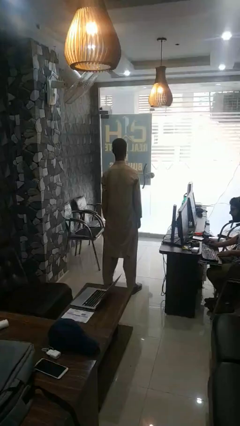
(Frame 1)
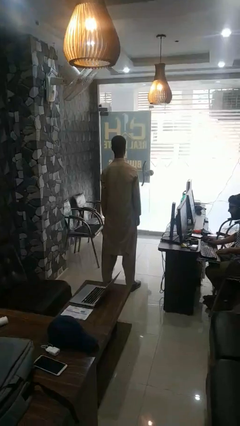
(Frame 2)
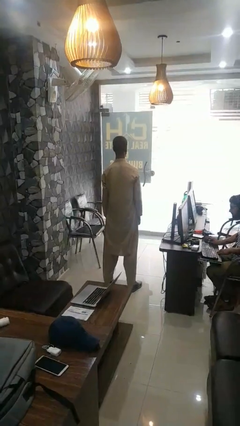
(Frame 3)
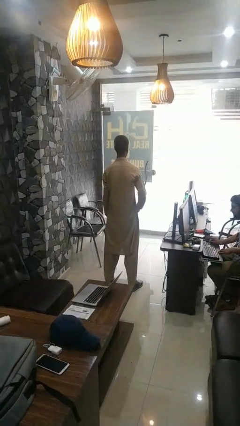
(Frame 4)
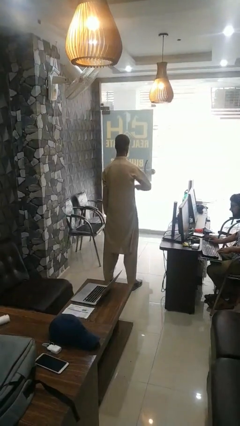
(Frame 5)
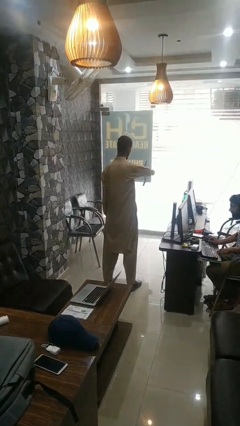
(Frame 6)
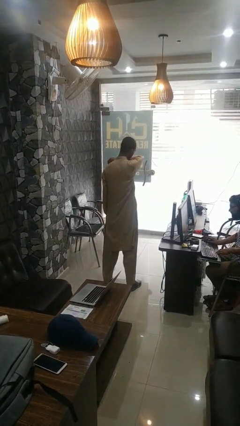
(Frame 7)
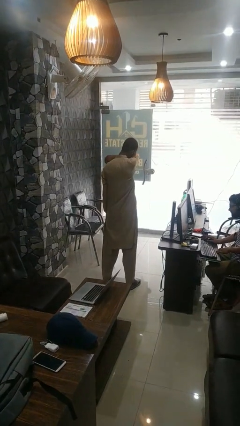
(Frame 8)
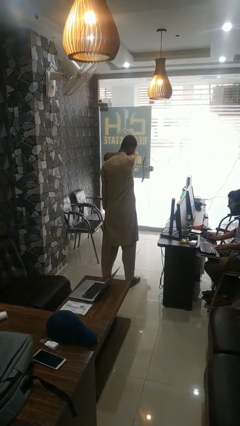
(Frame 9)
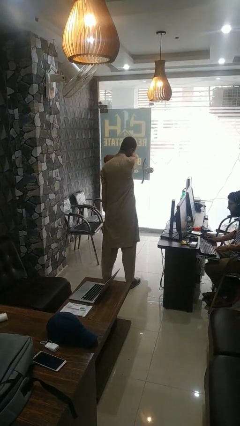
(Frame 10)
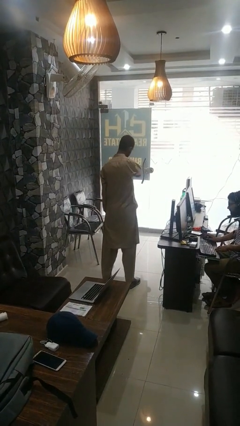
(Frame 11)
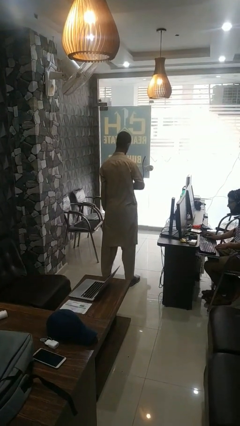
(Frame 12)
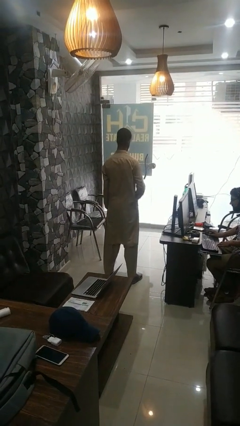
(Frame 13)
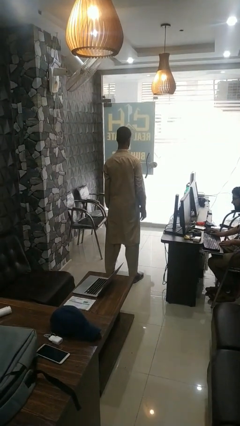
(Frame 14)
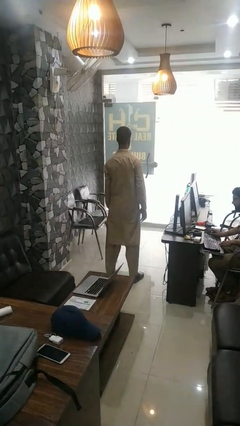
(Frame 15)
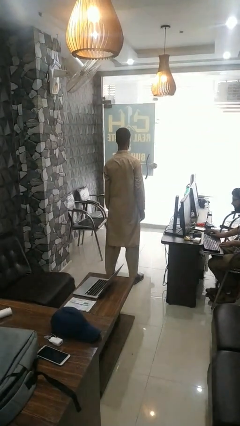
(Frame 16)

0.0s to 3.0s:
person sneezes into arm

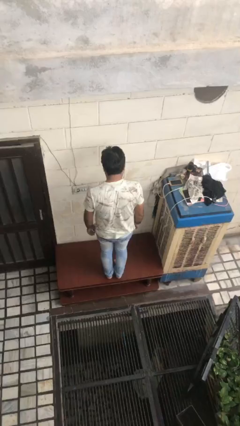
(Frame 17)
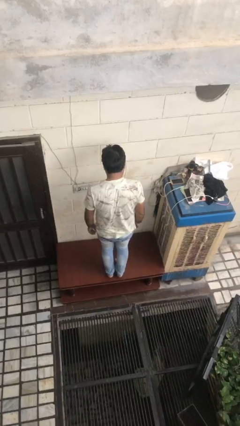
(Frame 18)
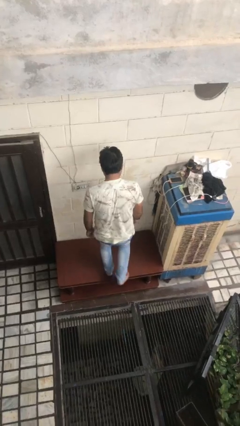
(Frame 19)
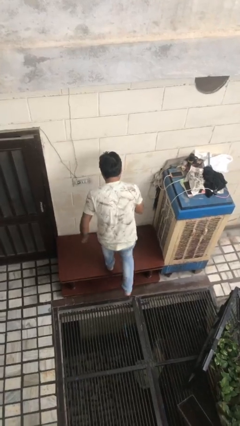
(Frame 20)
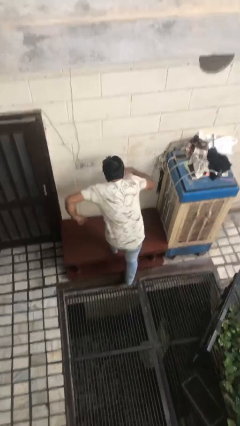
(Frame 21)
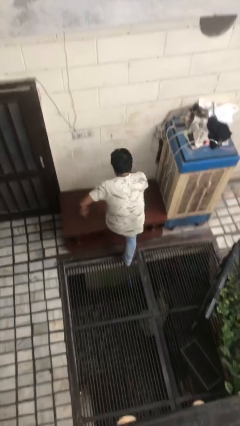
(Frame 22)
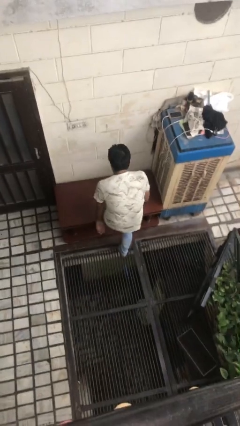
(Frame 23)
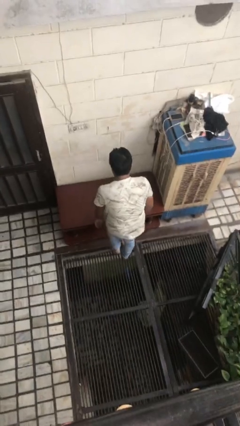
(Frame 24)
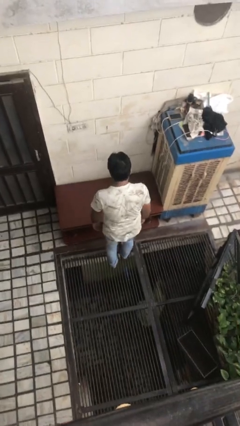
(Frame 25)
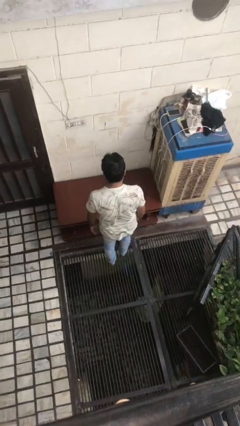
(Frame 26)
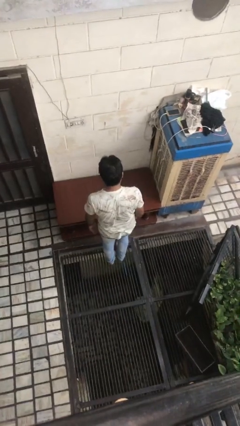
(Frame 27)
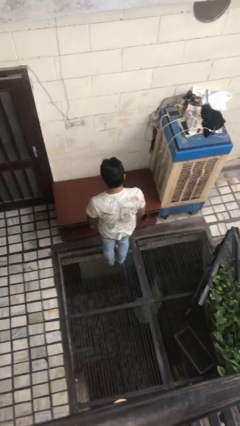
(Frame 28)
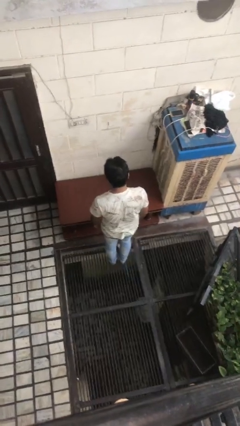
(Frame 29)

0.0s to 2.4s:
person climbs off table

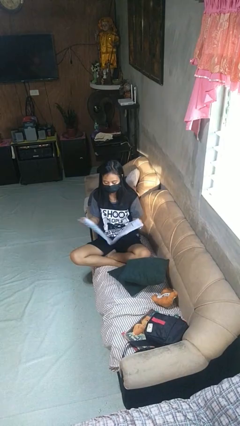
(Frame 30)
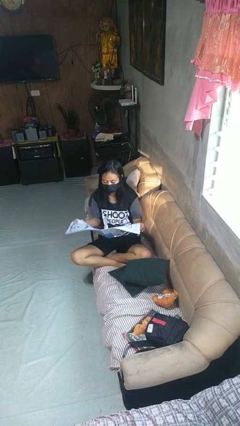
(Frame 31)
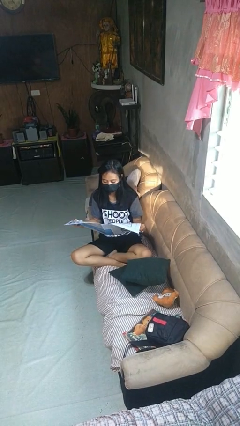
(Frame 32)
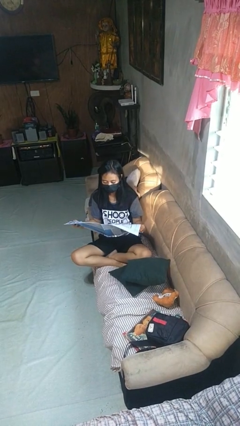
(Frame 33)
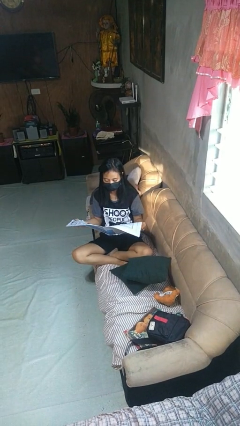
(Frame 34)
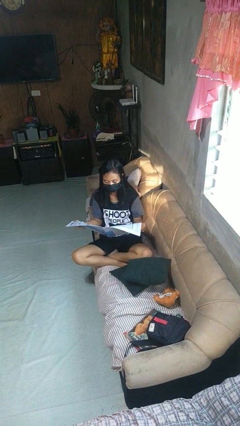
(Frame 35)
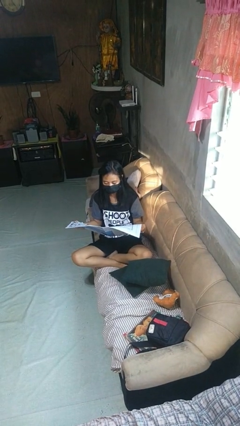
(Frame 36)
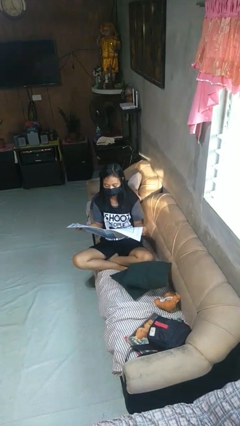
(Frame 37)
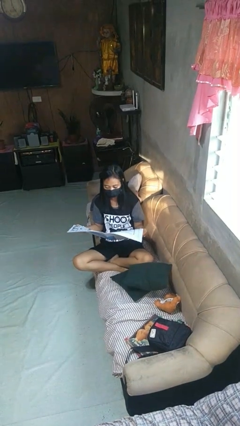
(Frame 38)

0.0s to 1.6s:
person reads newspaper

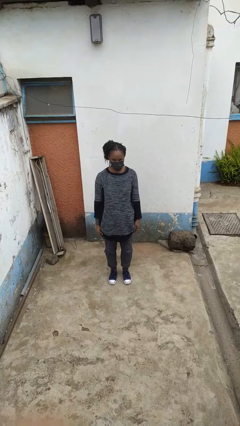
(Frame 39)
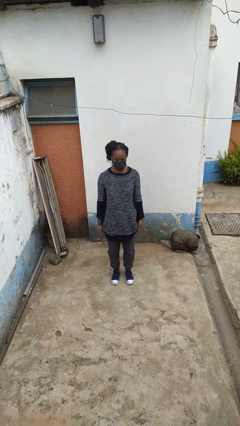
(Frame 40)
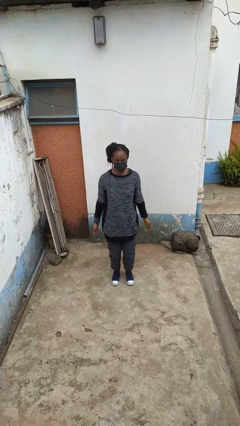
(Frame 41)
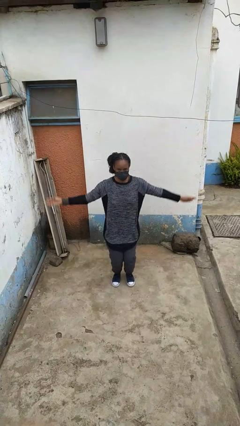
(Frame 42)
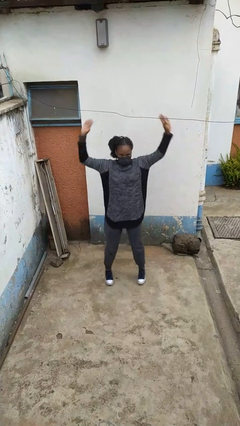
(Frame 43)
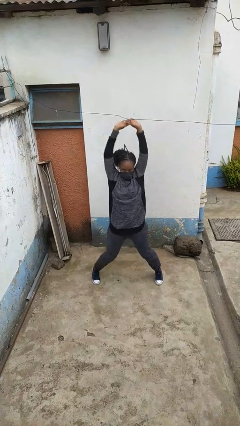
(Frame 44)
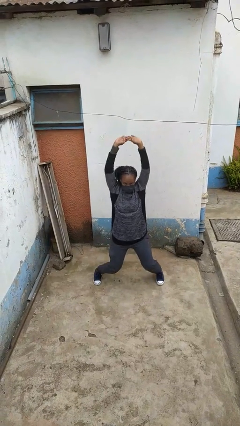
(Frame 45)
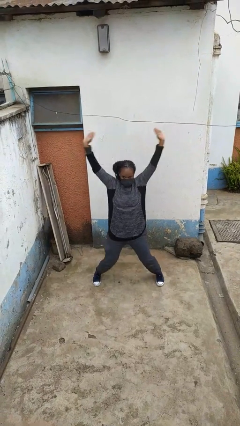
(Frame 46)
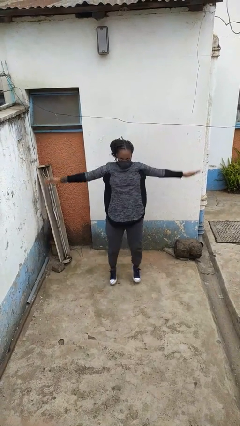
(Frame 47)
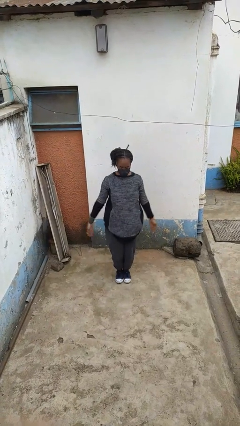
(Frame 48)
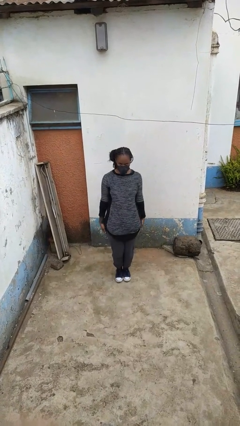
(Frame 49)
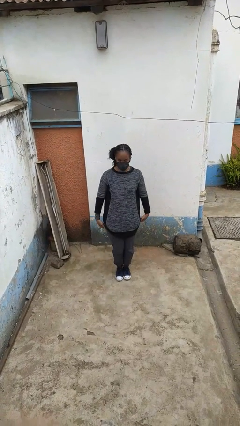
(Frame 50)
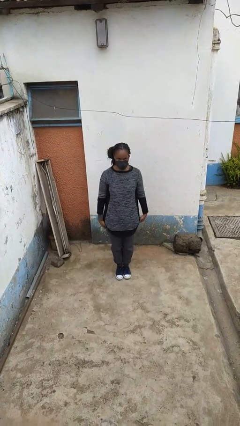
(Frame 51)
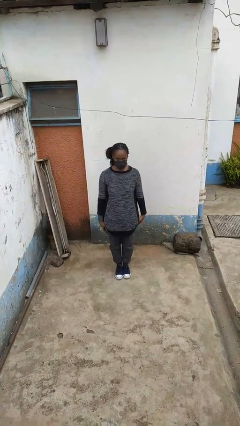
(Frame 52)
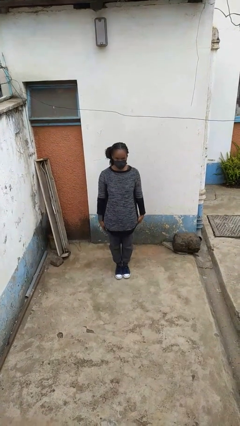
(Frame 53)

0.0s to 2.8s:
person exercises with jumping jacks

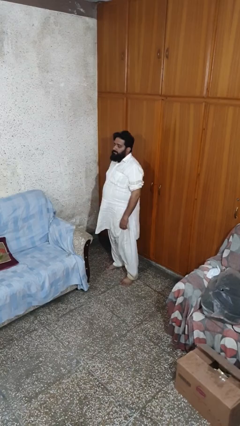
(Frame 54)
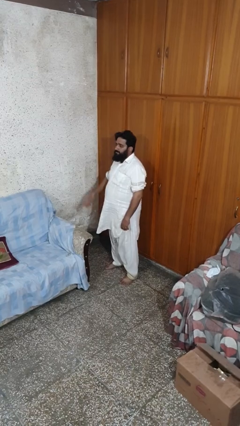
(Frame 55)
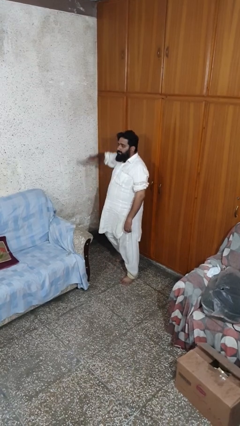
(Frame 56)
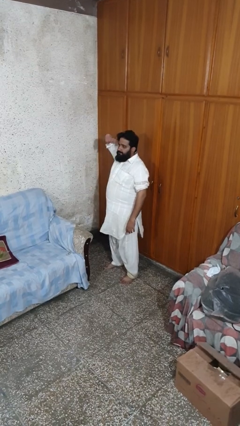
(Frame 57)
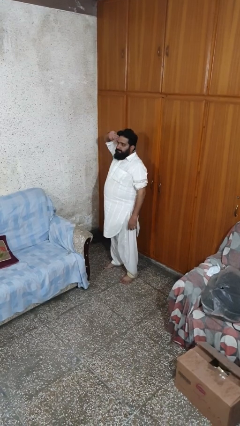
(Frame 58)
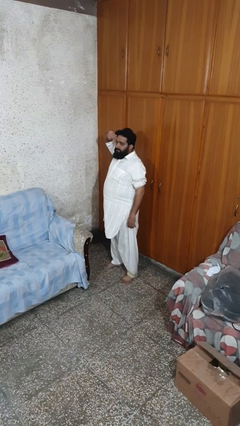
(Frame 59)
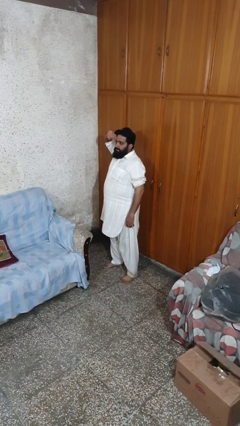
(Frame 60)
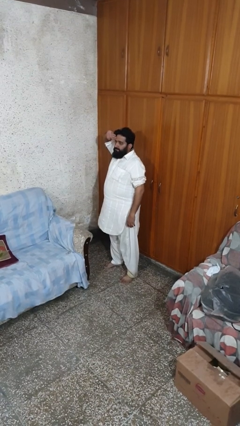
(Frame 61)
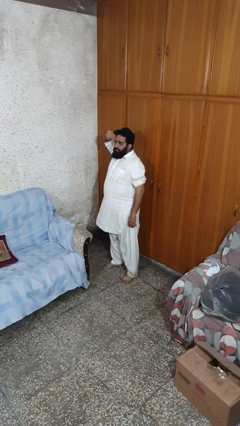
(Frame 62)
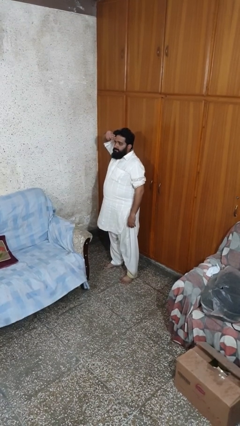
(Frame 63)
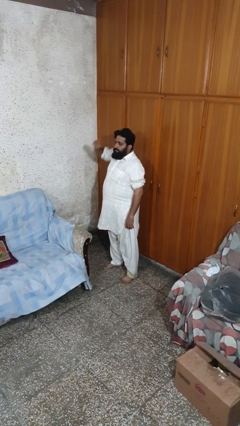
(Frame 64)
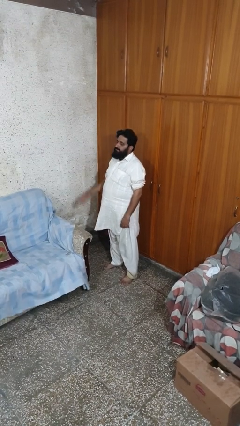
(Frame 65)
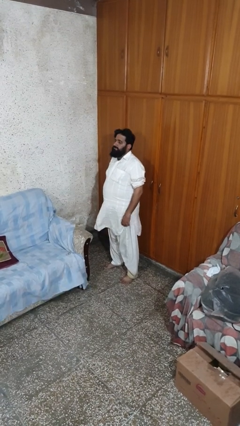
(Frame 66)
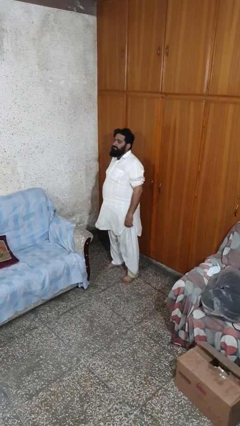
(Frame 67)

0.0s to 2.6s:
person salutes

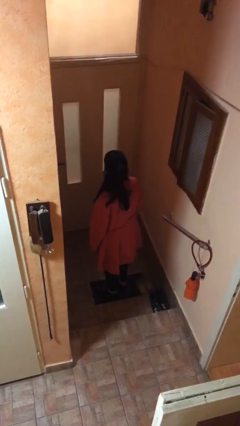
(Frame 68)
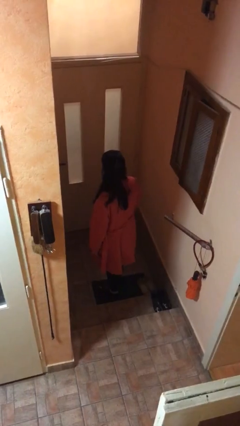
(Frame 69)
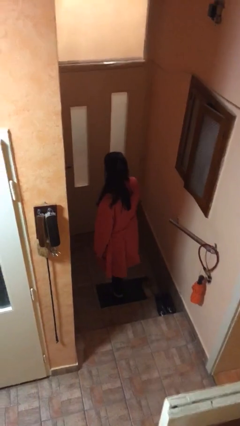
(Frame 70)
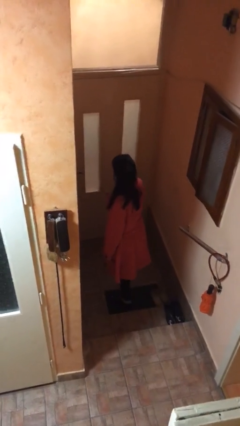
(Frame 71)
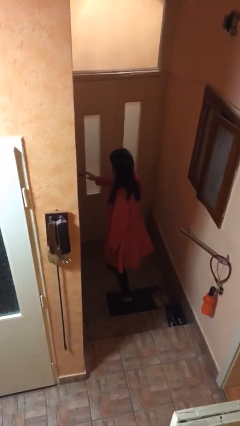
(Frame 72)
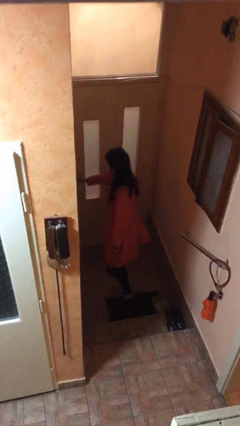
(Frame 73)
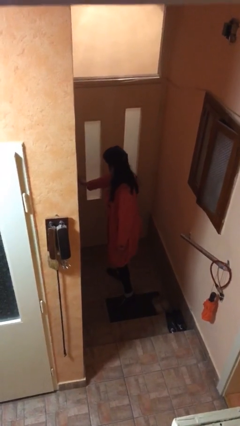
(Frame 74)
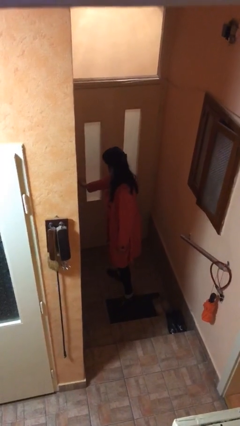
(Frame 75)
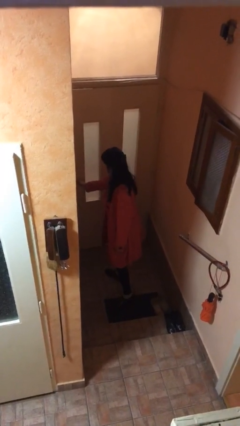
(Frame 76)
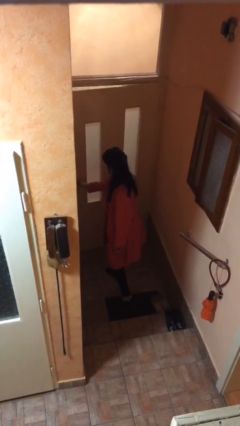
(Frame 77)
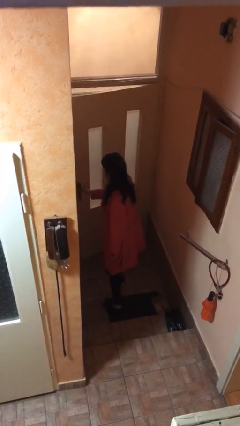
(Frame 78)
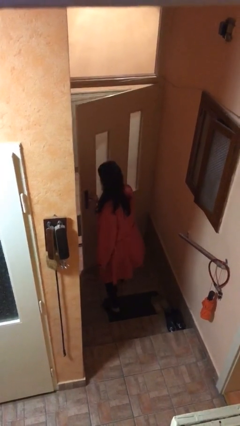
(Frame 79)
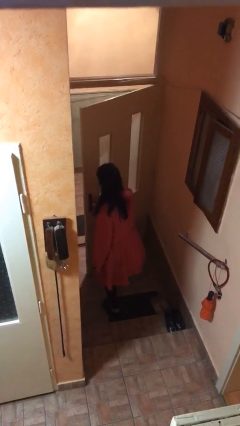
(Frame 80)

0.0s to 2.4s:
person opens facility door

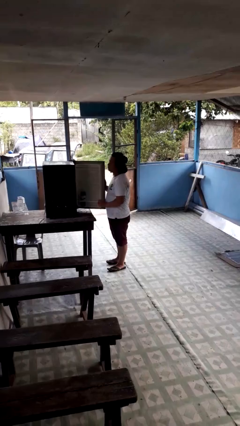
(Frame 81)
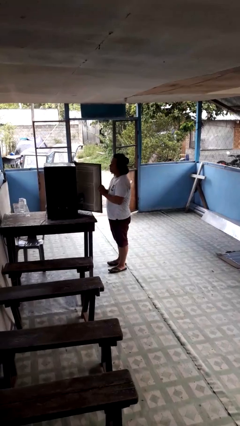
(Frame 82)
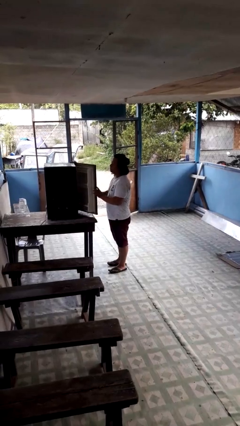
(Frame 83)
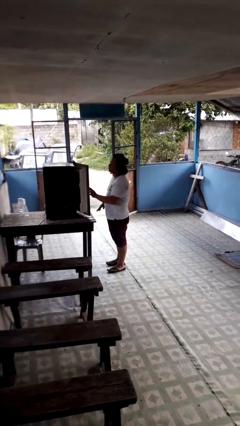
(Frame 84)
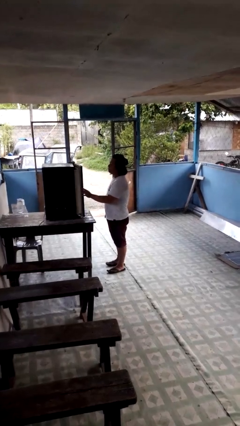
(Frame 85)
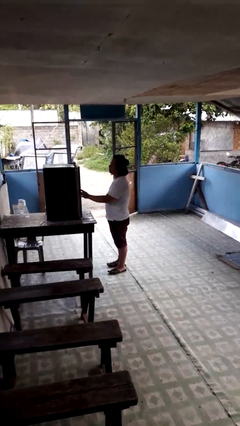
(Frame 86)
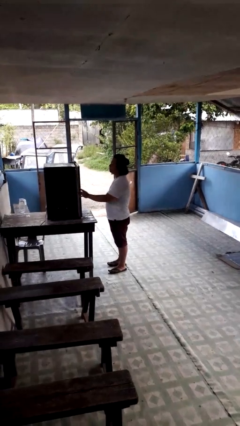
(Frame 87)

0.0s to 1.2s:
person closes refrigerator

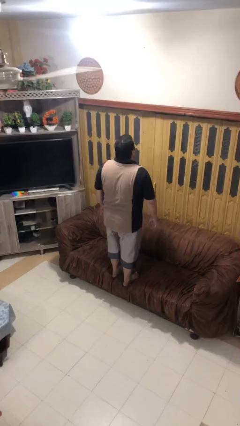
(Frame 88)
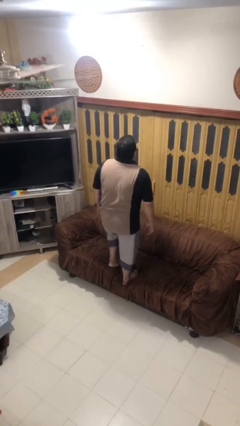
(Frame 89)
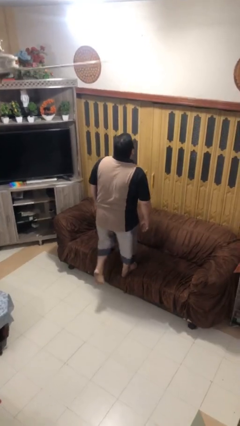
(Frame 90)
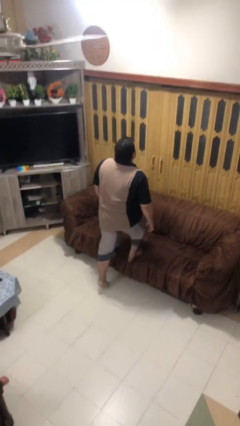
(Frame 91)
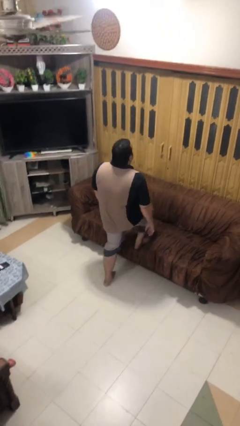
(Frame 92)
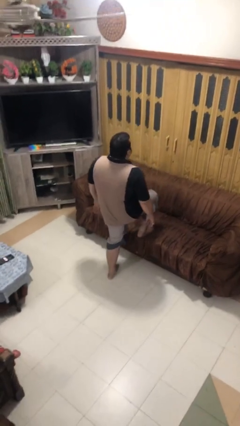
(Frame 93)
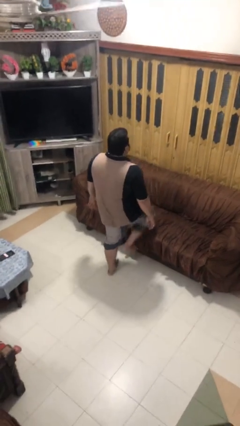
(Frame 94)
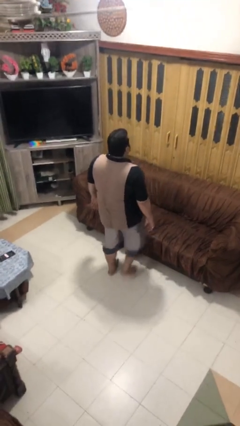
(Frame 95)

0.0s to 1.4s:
person climbs off couch
